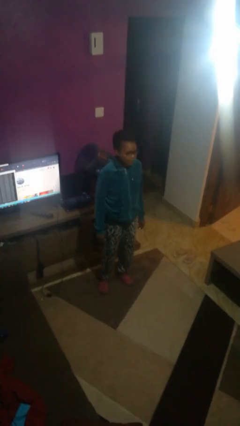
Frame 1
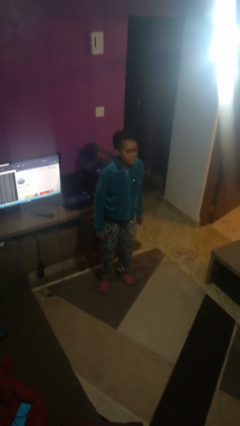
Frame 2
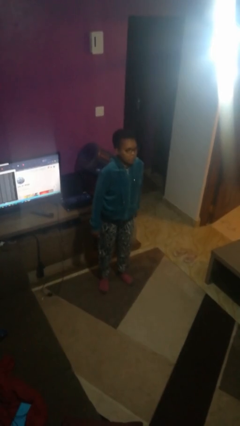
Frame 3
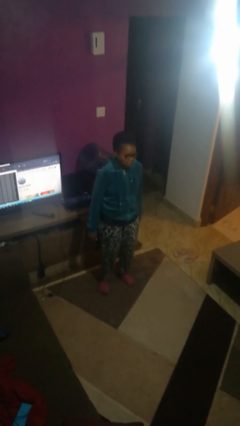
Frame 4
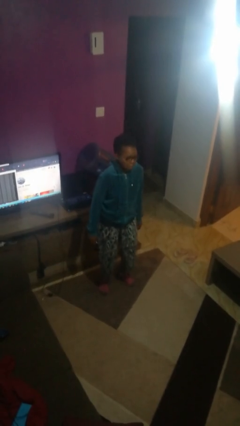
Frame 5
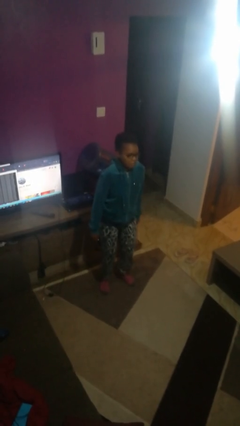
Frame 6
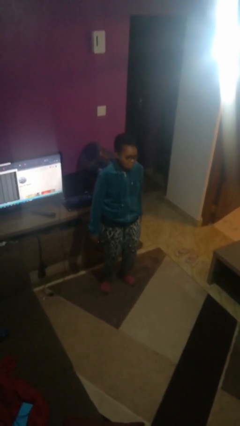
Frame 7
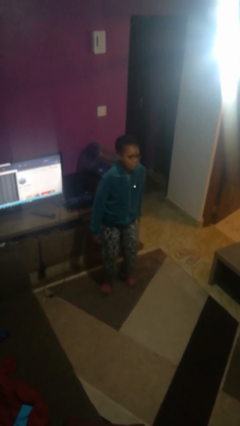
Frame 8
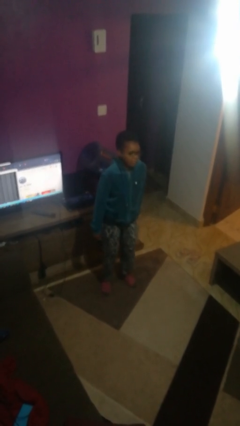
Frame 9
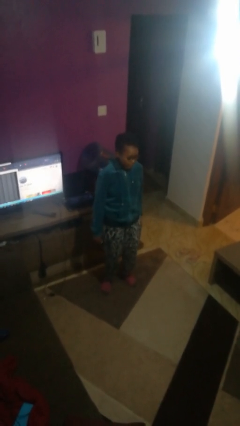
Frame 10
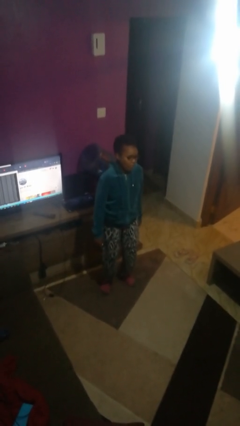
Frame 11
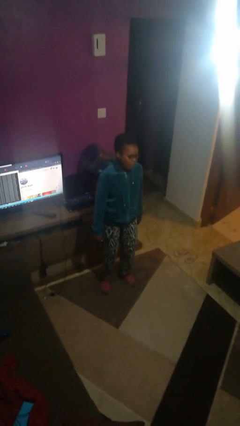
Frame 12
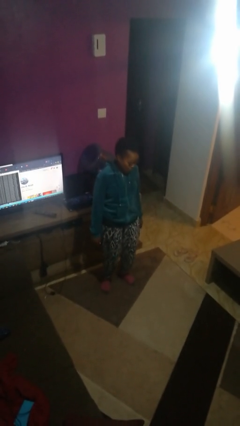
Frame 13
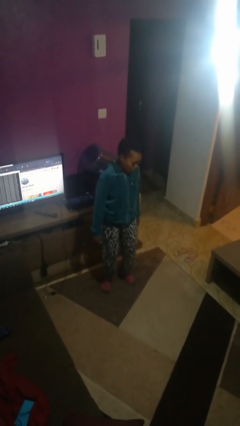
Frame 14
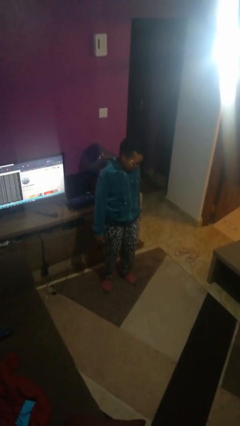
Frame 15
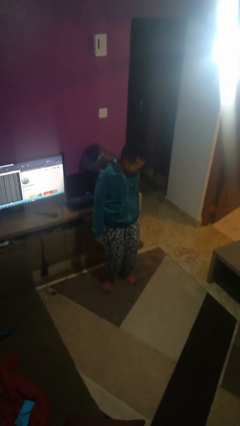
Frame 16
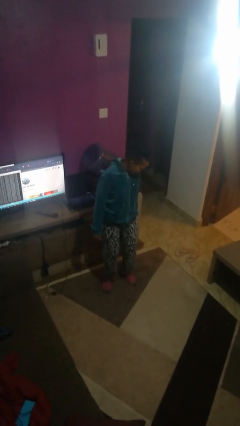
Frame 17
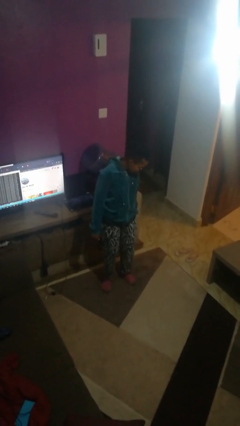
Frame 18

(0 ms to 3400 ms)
person wiggles hips

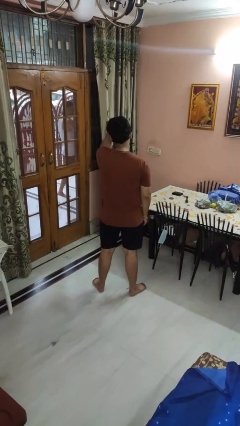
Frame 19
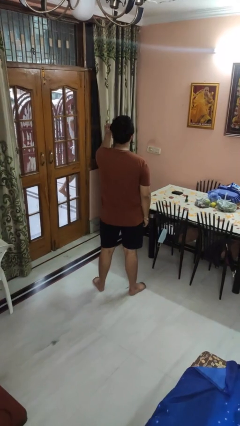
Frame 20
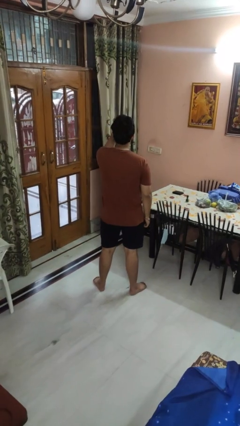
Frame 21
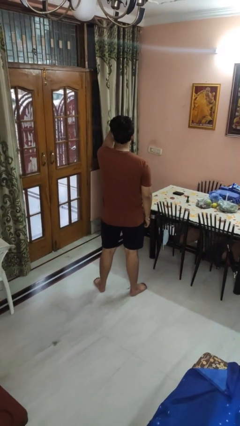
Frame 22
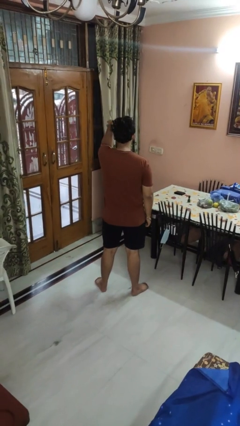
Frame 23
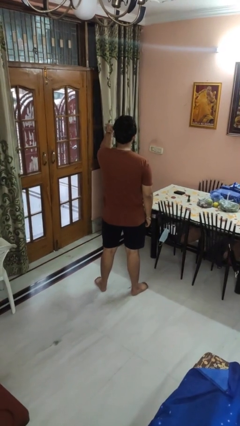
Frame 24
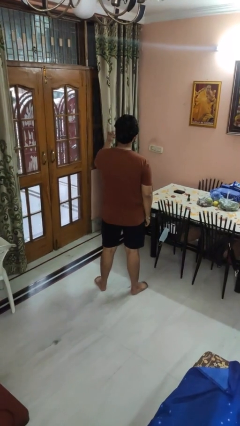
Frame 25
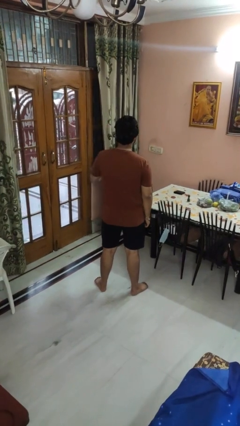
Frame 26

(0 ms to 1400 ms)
person strokes hair

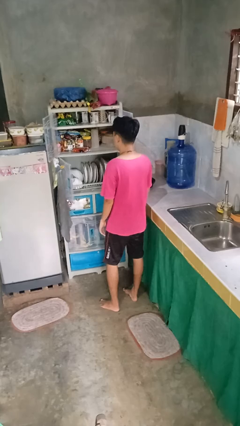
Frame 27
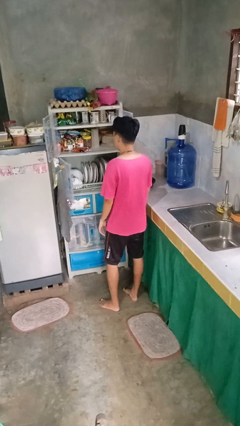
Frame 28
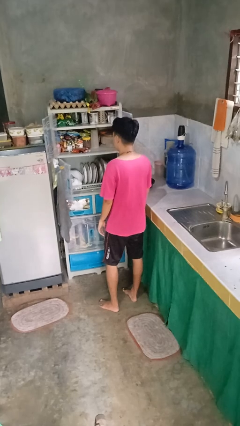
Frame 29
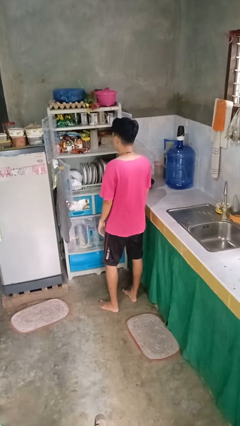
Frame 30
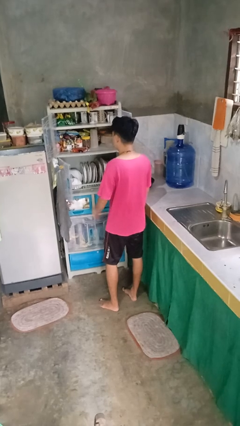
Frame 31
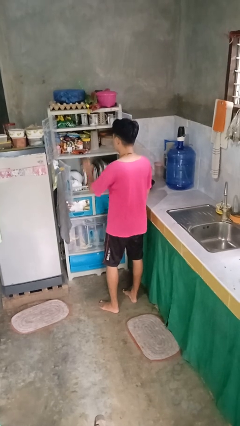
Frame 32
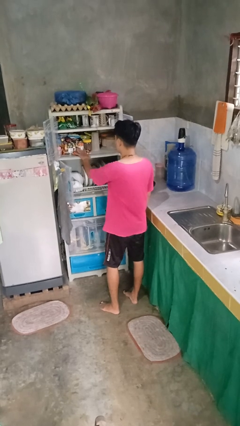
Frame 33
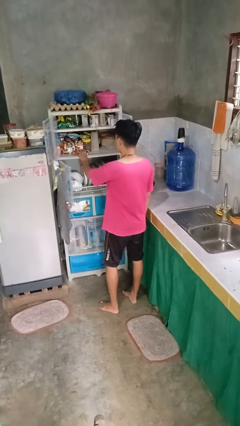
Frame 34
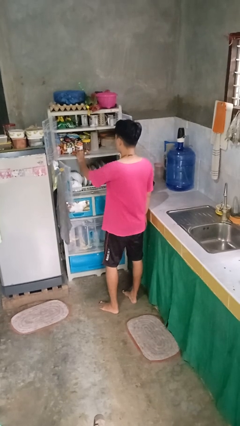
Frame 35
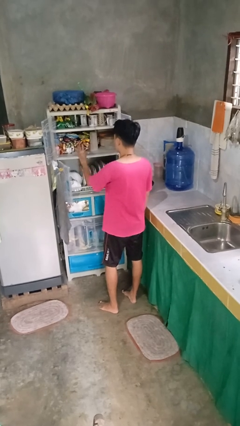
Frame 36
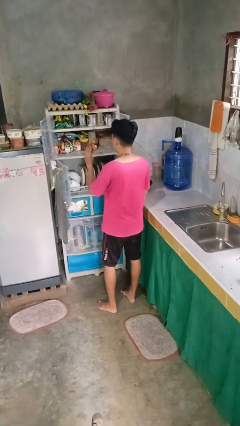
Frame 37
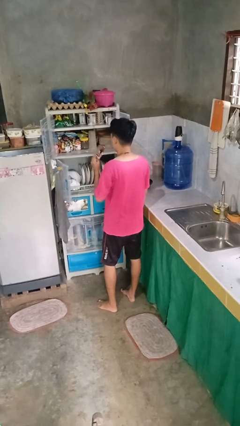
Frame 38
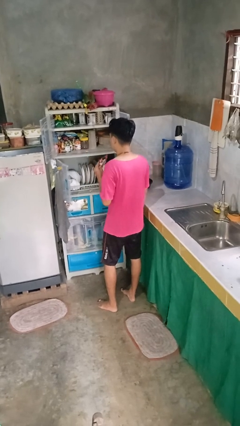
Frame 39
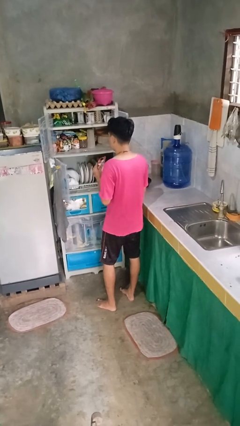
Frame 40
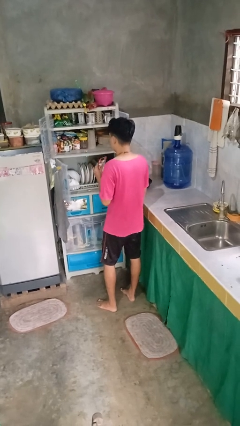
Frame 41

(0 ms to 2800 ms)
person takes object from cabinet

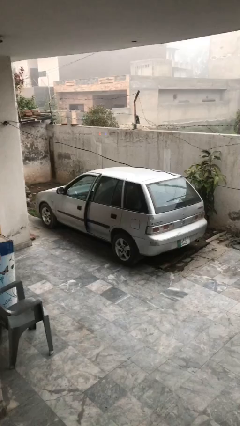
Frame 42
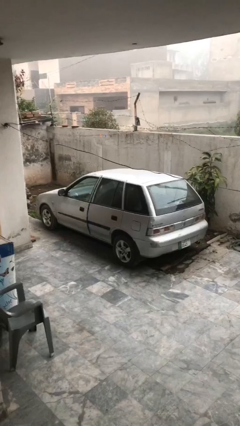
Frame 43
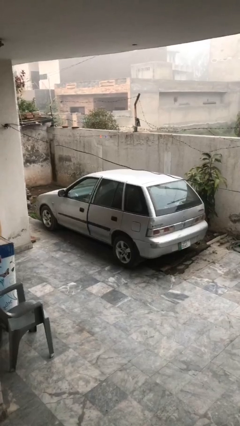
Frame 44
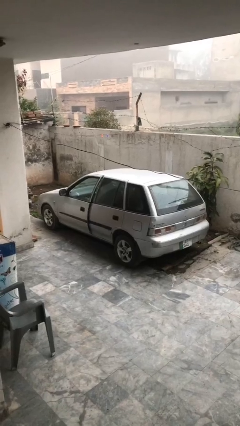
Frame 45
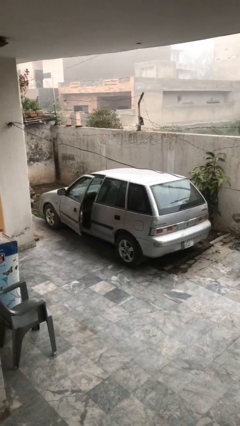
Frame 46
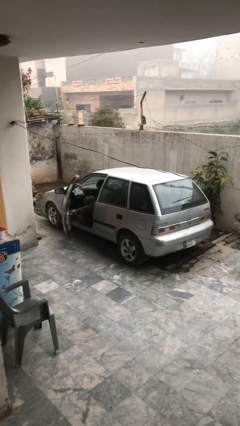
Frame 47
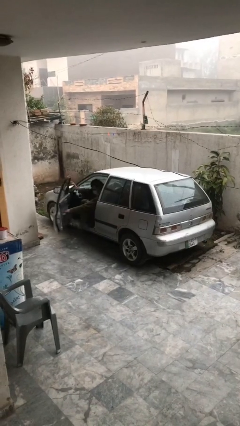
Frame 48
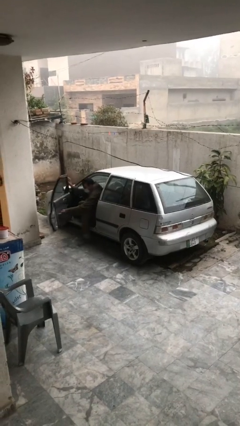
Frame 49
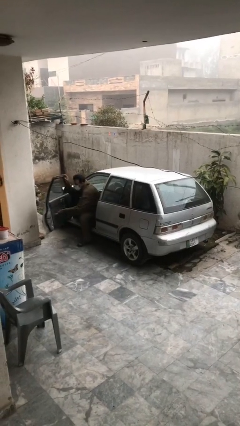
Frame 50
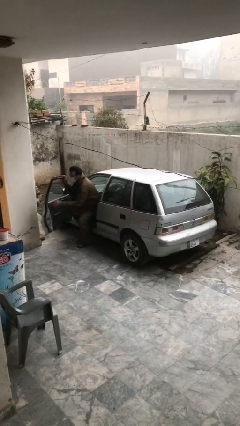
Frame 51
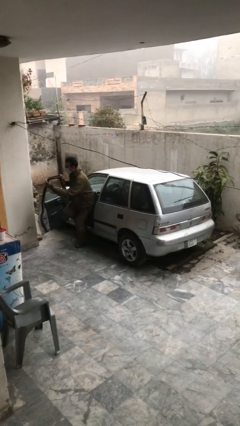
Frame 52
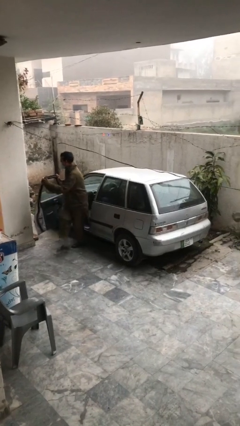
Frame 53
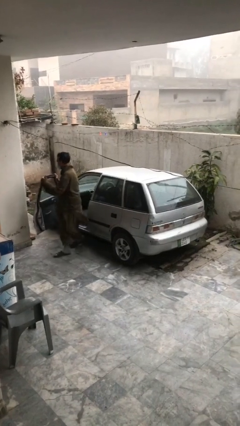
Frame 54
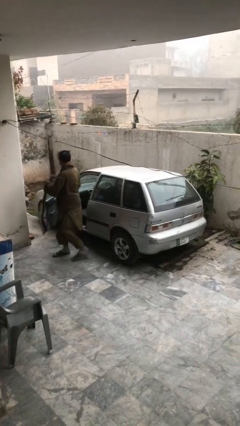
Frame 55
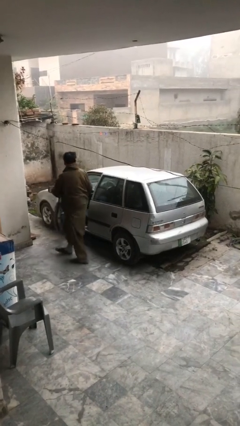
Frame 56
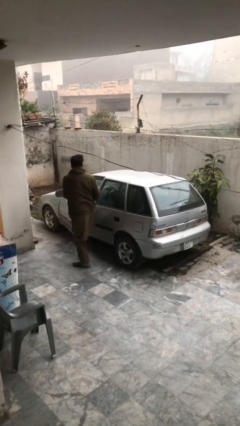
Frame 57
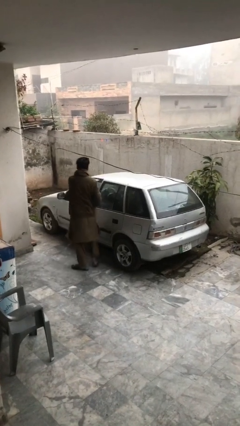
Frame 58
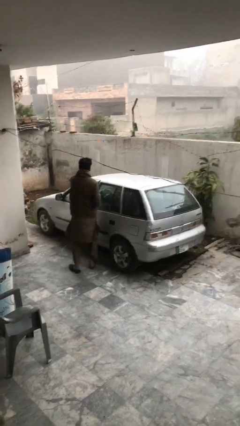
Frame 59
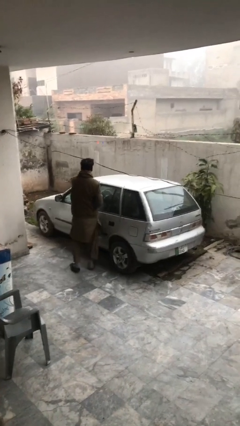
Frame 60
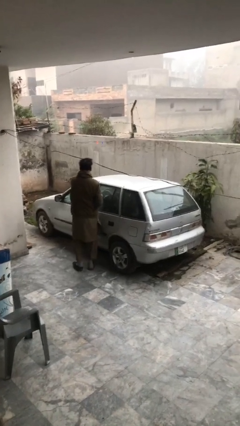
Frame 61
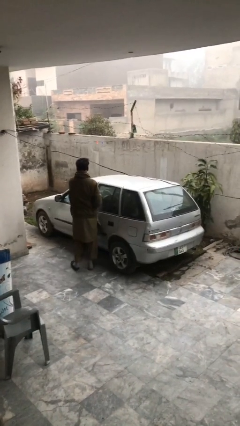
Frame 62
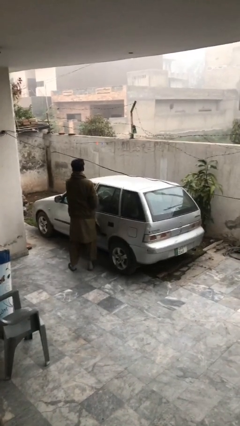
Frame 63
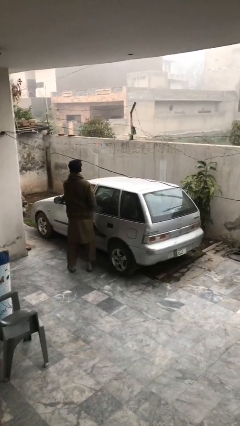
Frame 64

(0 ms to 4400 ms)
car drops off person

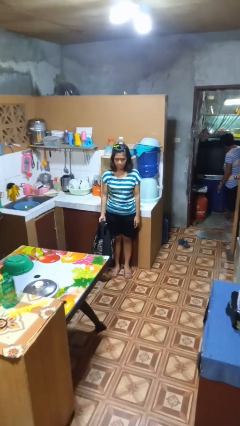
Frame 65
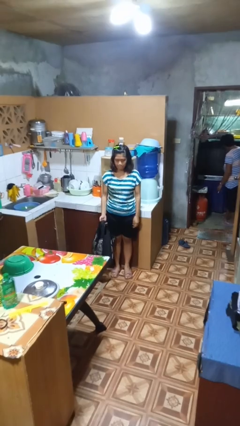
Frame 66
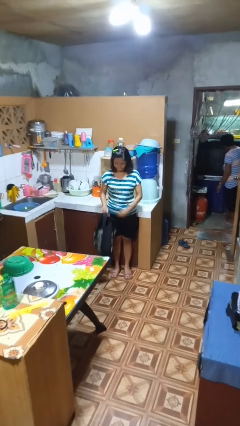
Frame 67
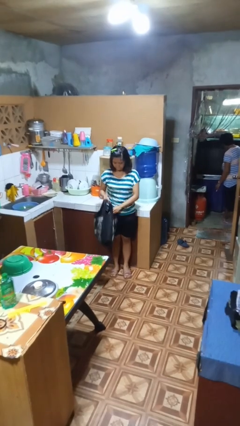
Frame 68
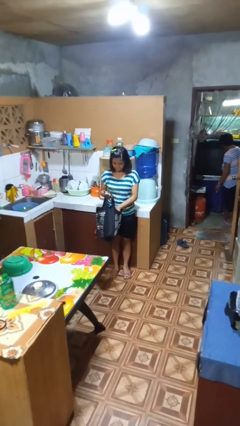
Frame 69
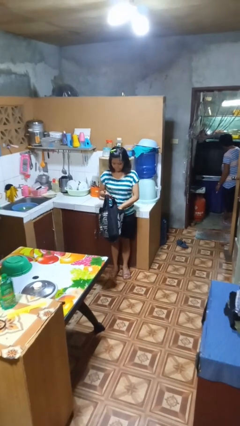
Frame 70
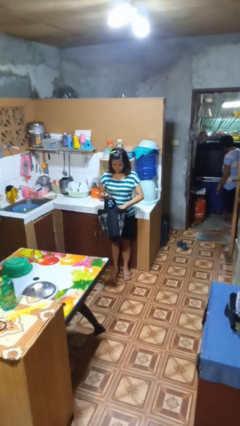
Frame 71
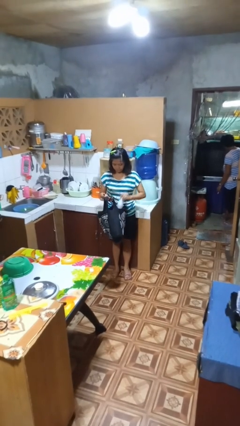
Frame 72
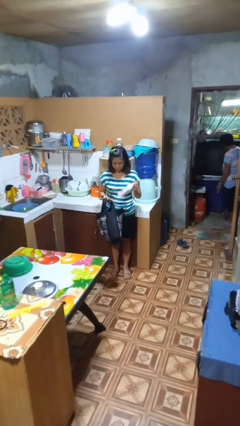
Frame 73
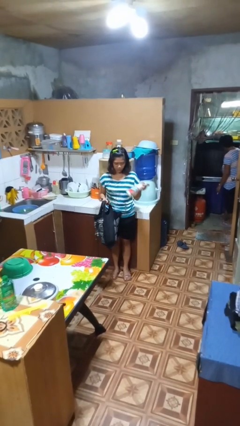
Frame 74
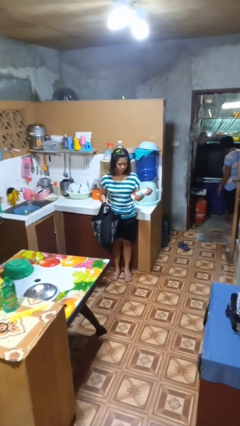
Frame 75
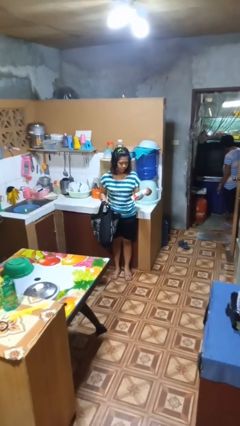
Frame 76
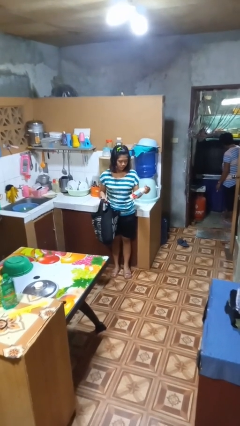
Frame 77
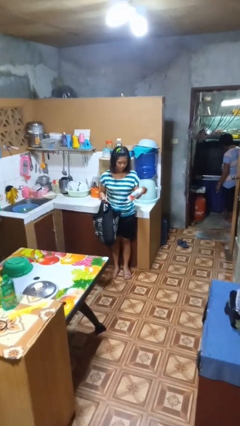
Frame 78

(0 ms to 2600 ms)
person takes object from bag

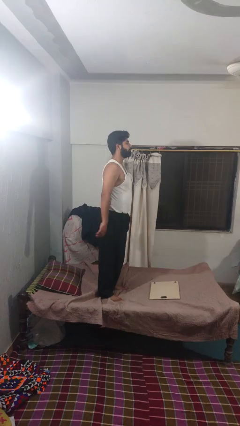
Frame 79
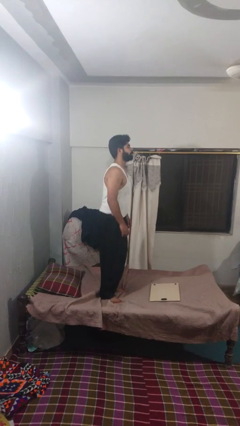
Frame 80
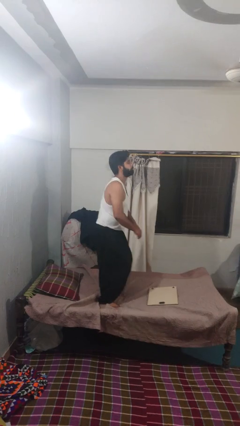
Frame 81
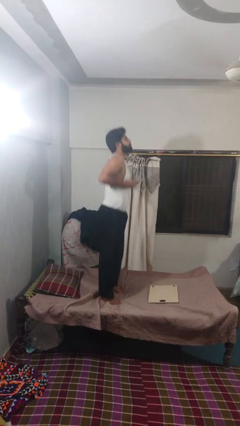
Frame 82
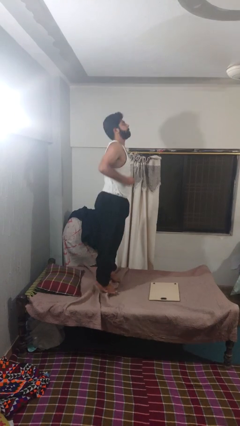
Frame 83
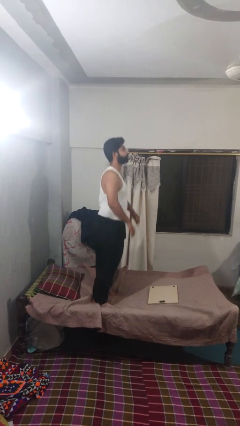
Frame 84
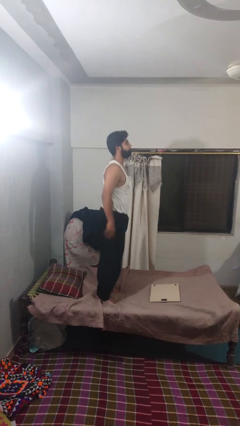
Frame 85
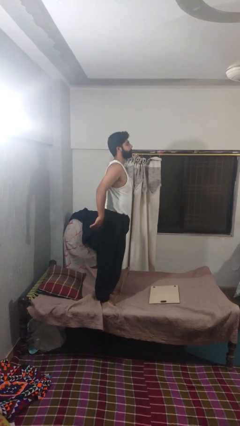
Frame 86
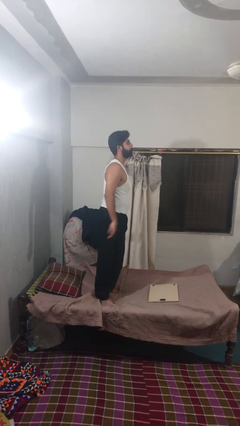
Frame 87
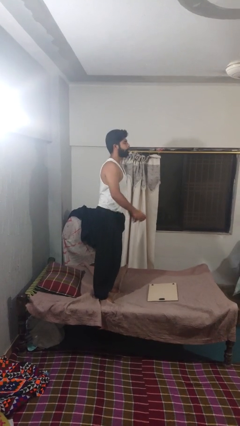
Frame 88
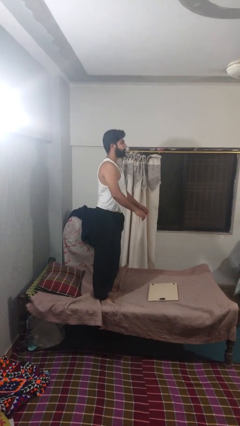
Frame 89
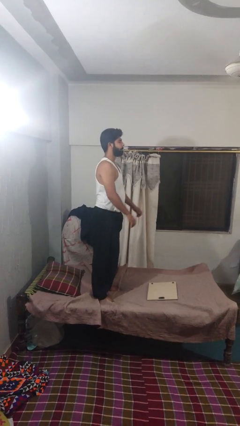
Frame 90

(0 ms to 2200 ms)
person jumps on bed

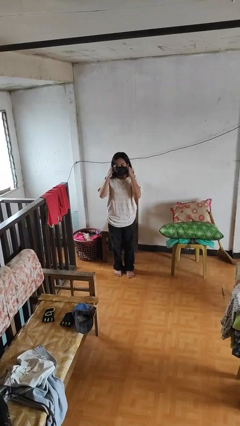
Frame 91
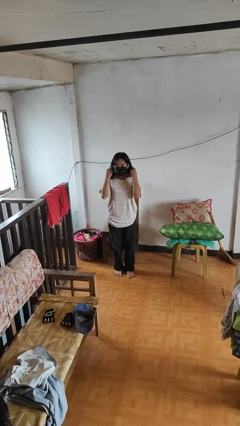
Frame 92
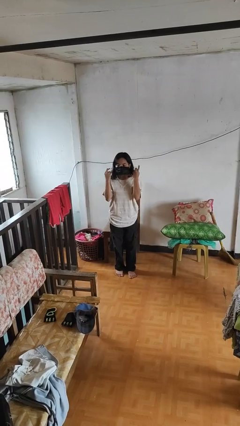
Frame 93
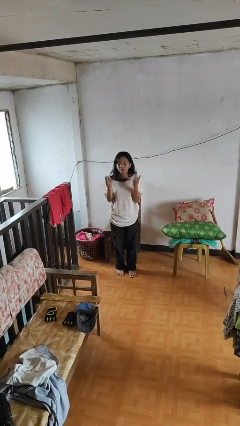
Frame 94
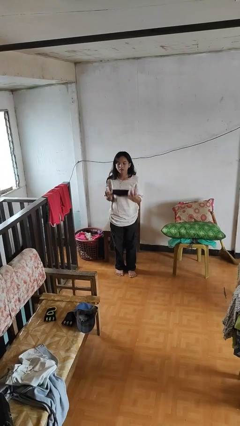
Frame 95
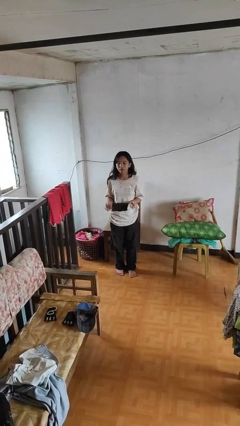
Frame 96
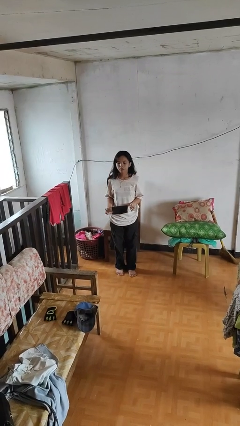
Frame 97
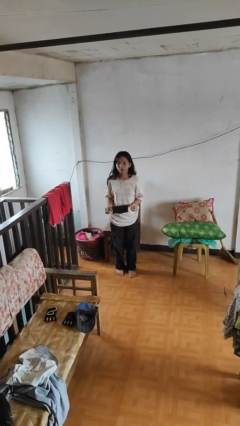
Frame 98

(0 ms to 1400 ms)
person takes off facemask
